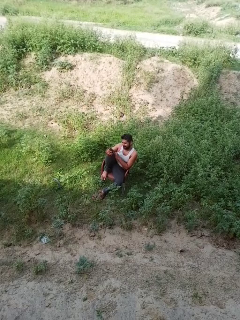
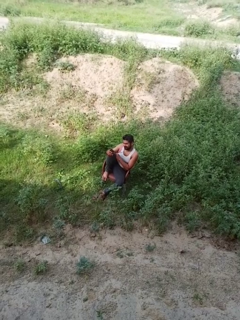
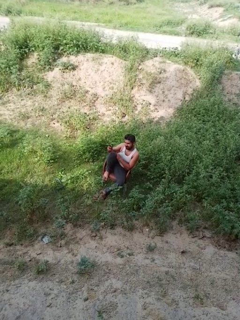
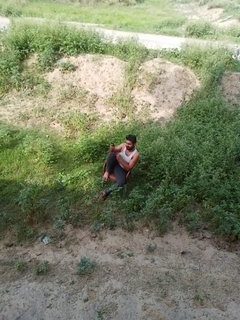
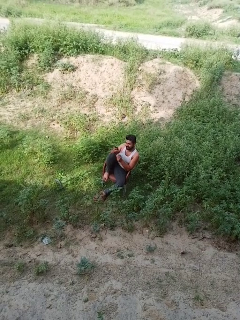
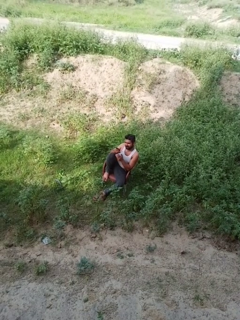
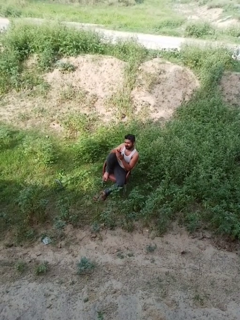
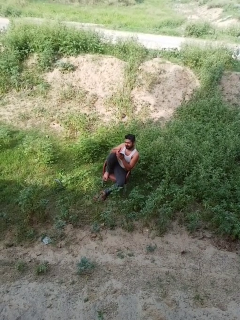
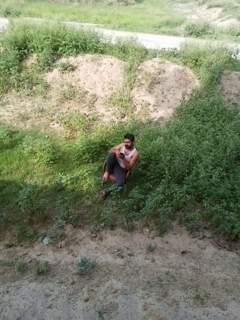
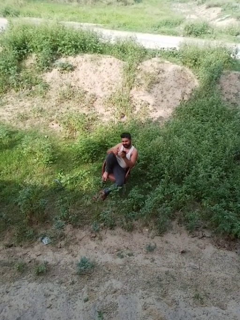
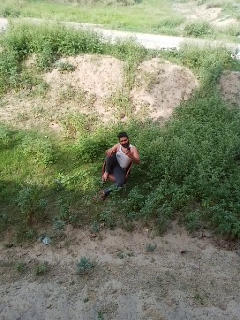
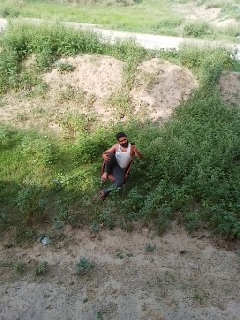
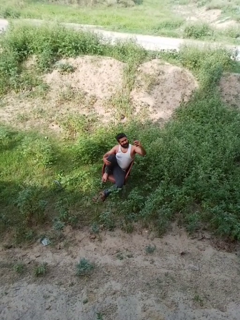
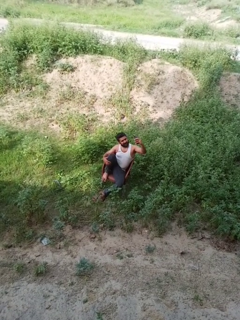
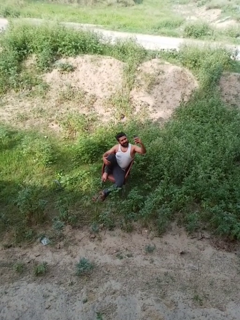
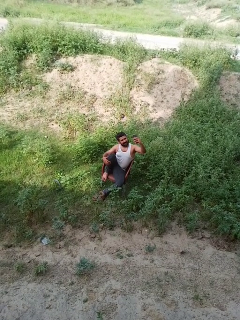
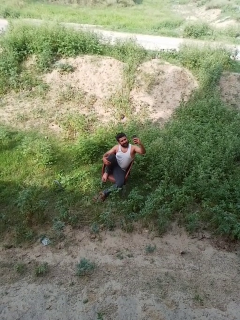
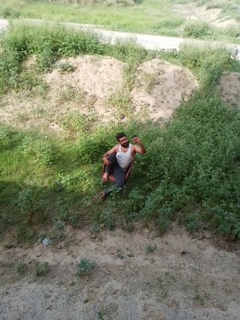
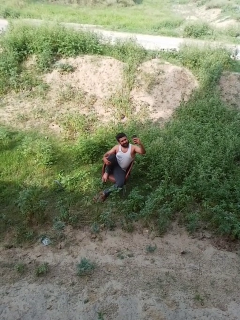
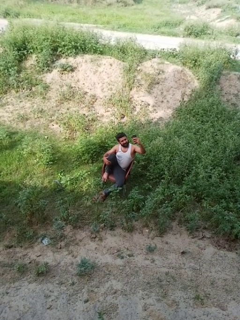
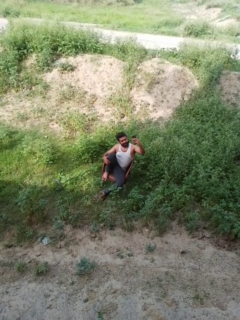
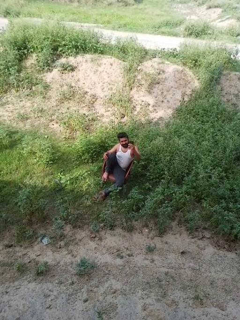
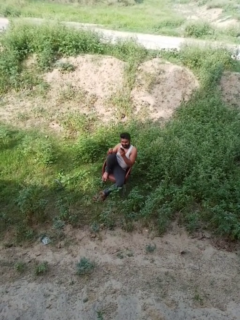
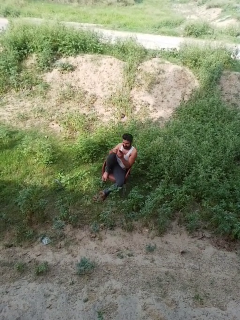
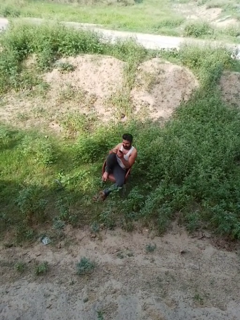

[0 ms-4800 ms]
person takes selfie

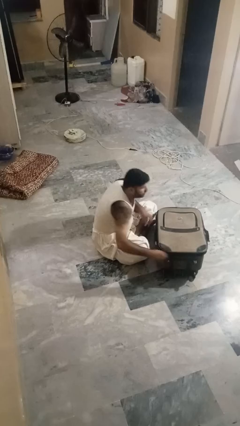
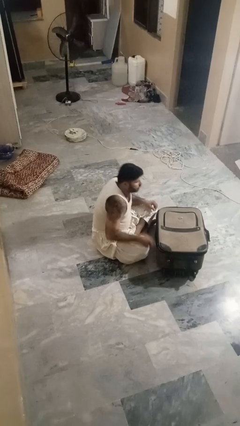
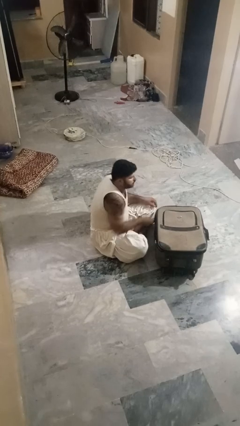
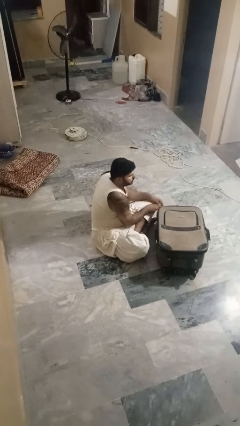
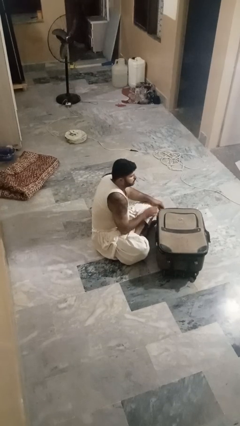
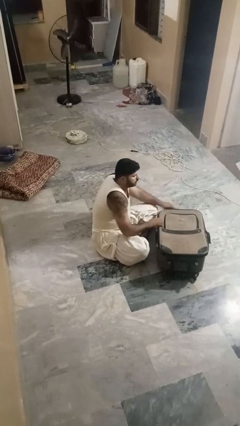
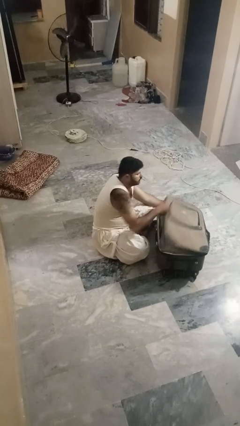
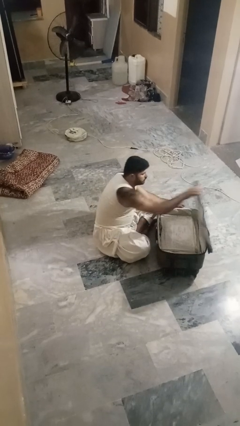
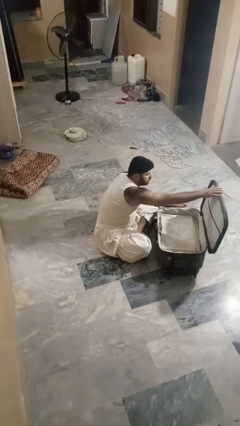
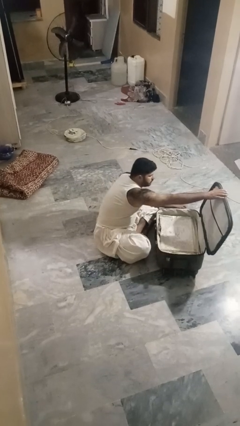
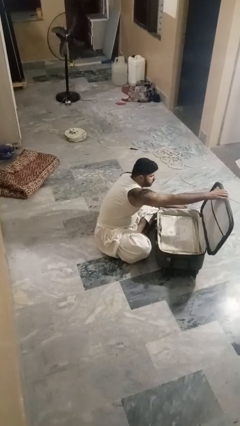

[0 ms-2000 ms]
person opens suitcase

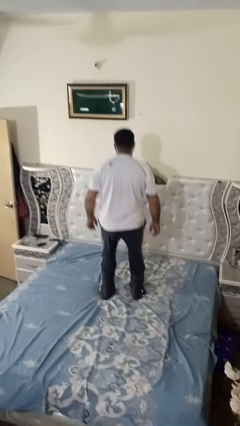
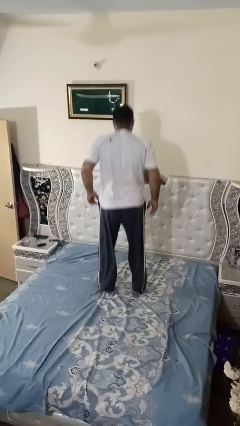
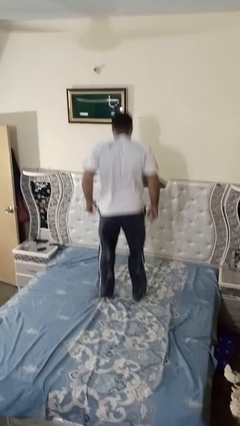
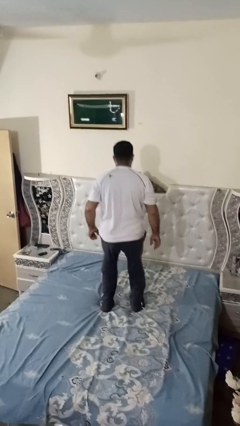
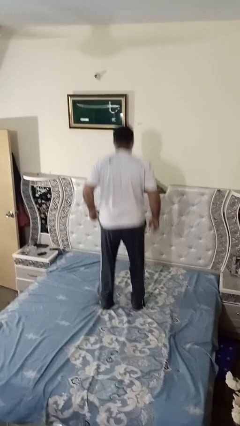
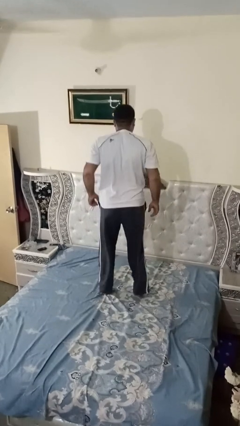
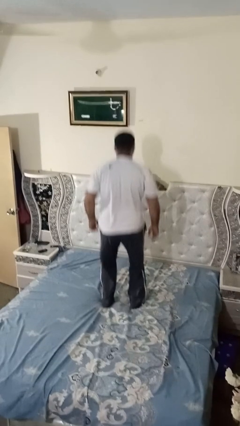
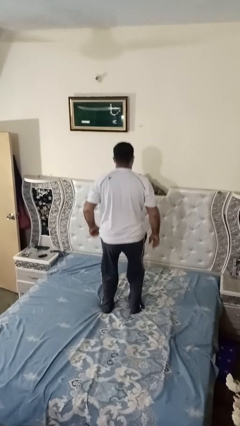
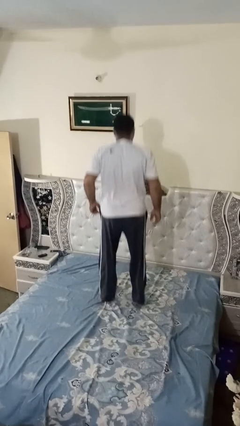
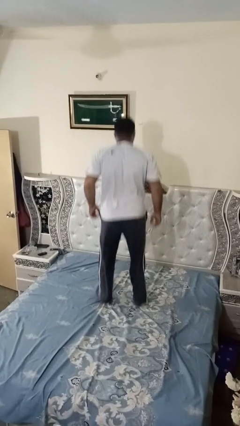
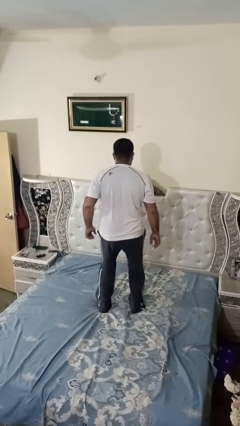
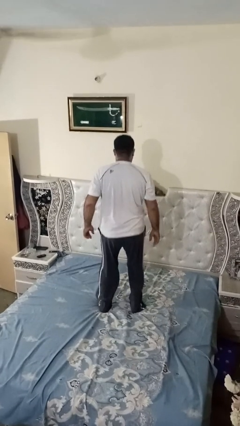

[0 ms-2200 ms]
person jumps on bed

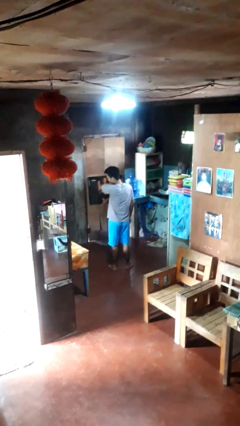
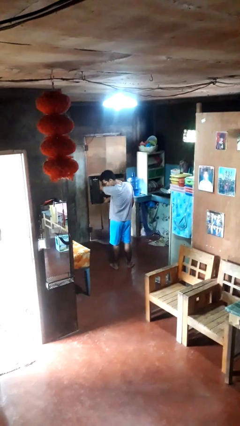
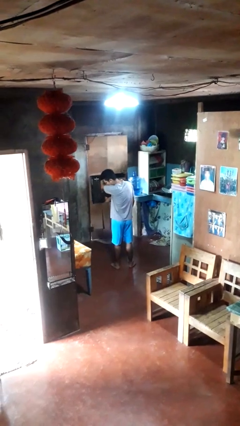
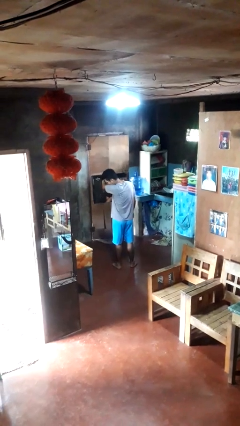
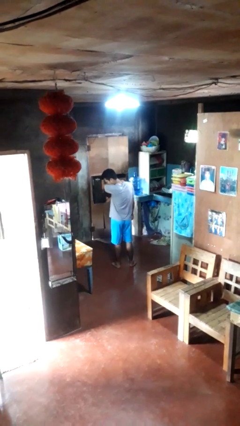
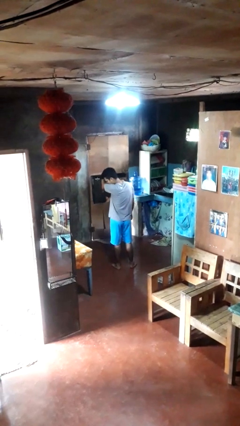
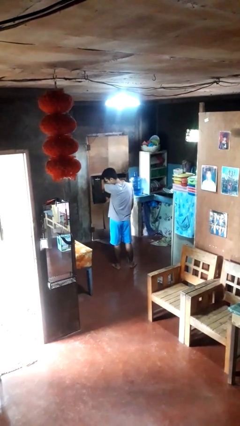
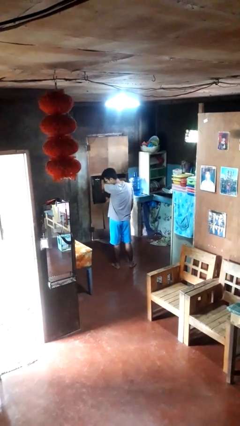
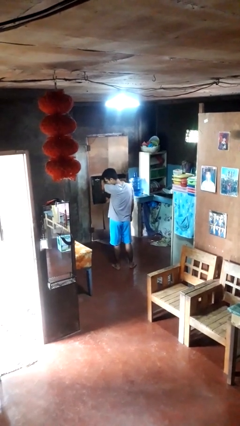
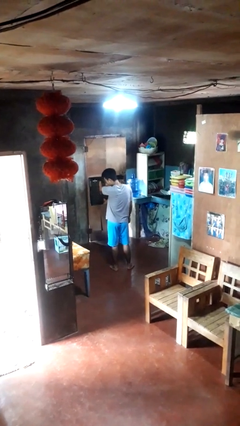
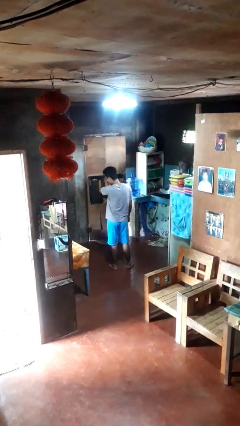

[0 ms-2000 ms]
person sneezes into arm

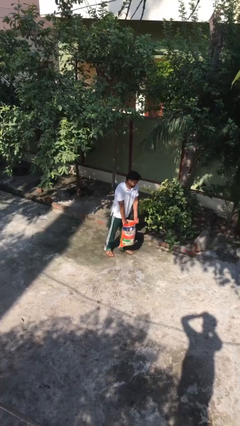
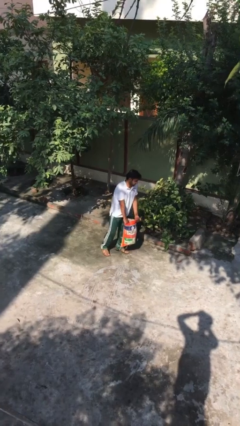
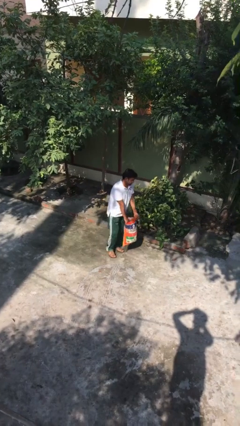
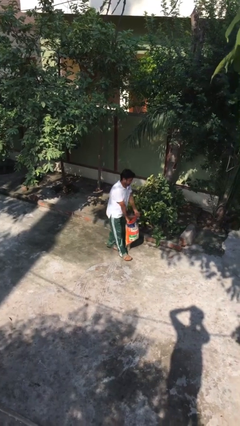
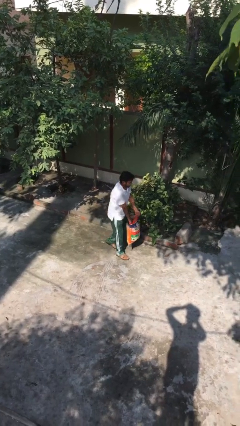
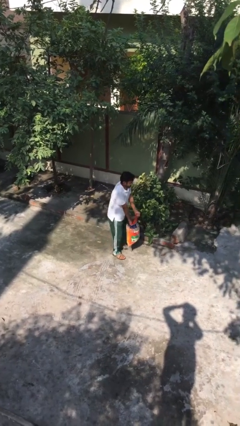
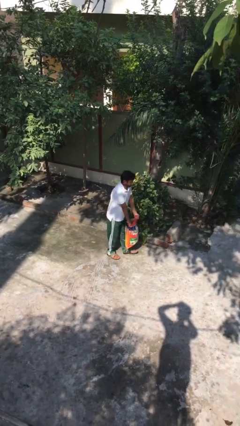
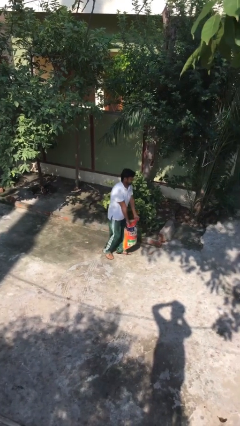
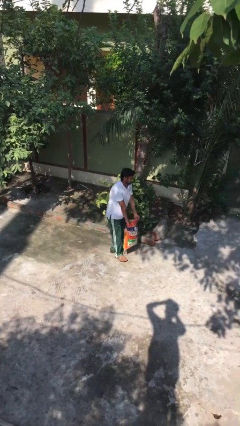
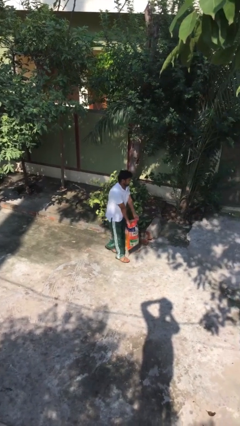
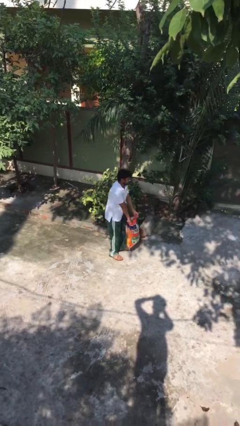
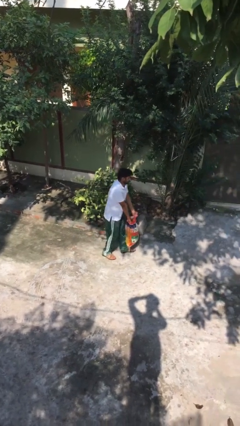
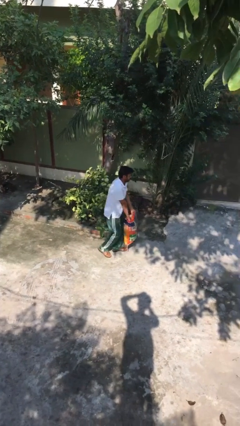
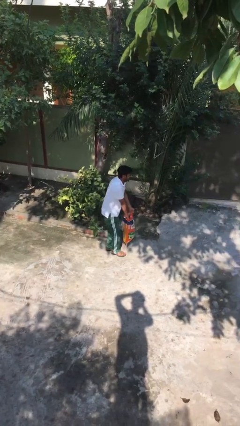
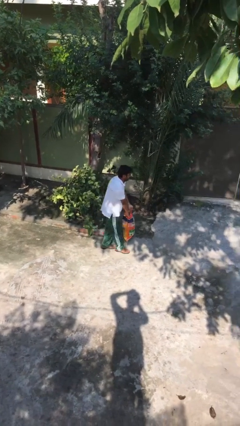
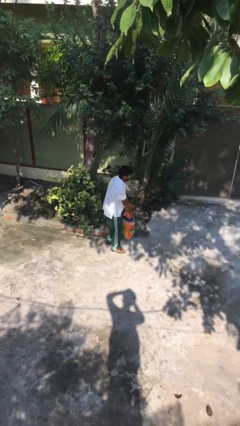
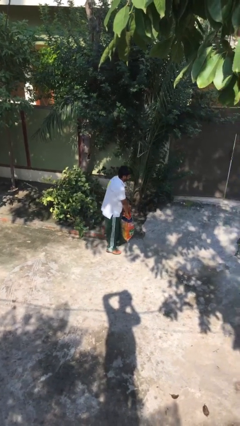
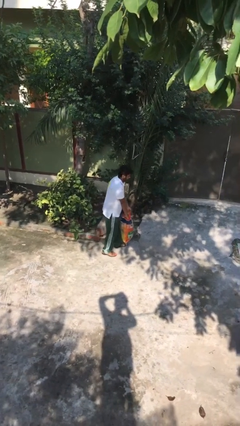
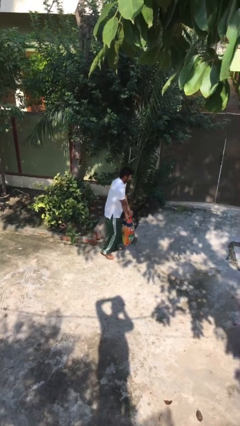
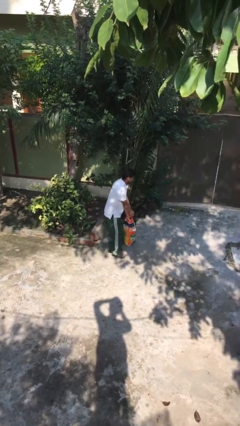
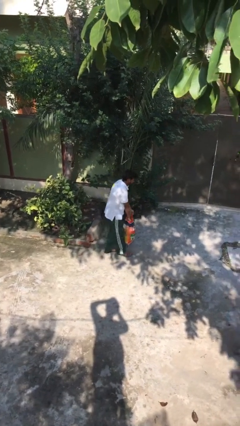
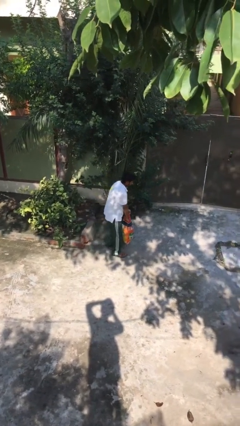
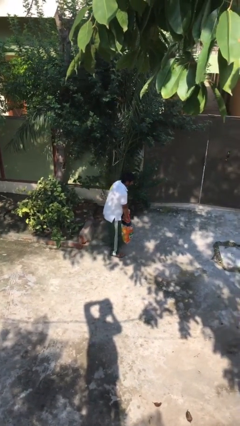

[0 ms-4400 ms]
person carries heavy object

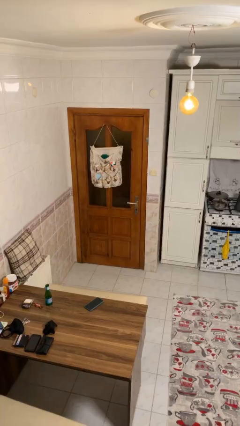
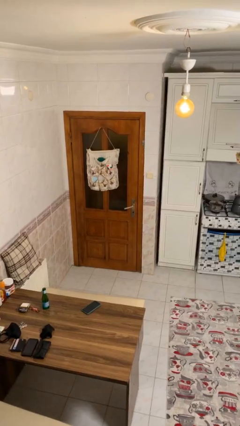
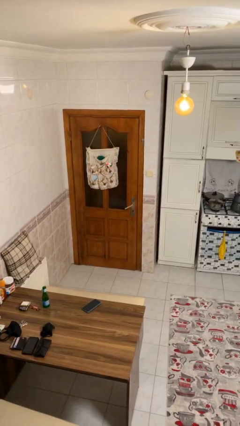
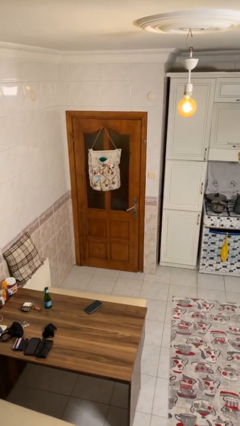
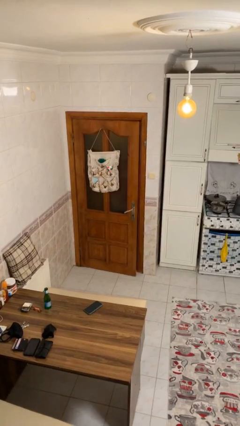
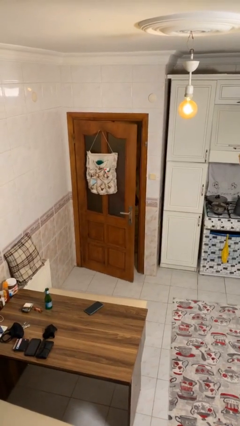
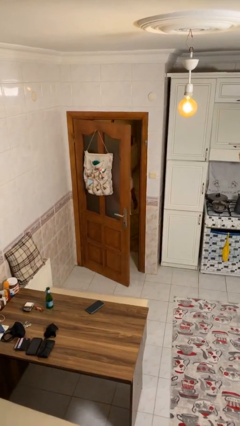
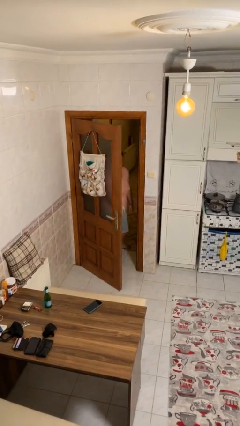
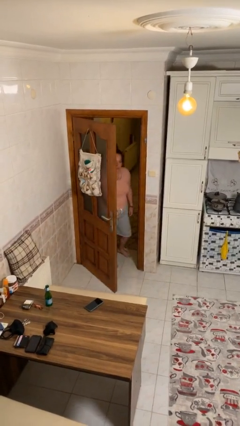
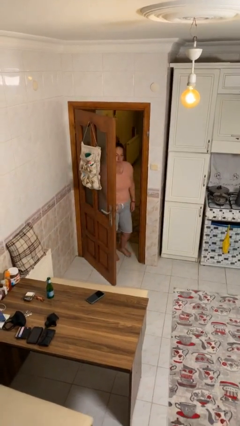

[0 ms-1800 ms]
person opens facility door

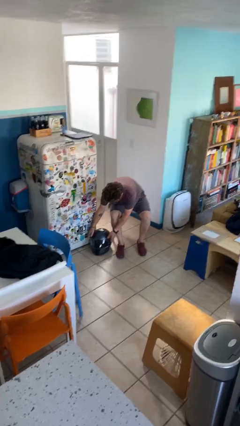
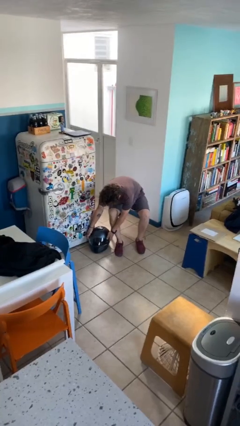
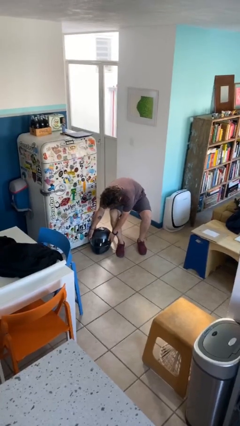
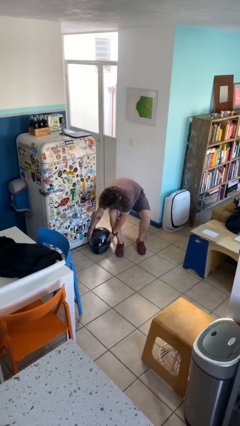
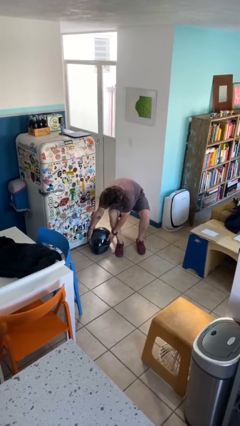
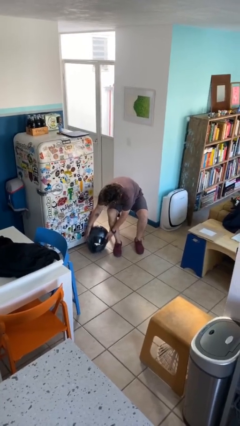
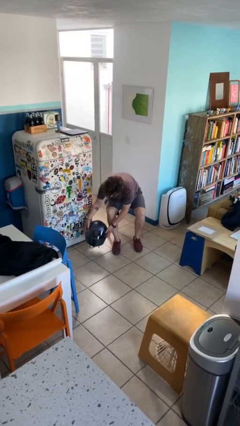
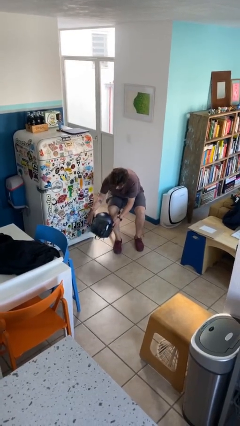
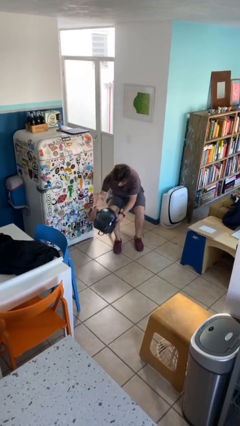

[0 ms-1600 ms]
person picks up object from floor
